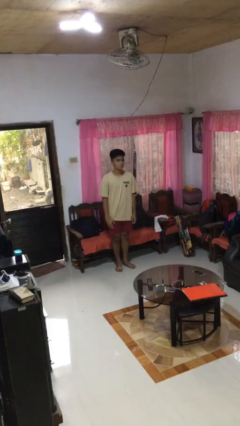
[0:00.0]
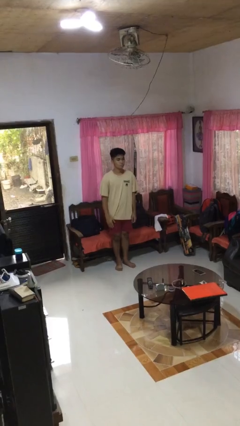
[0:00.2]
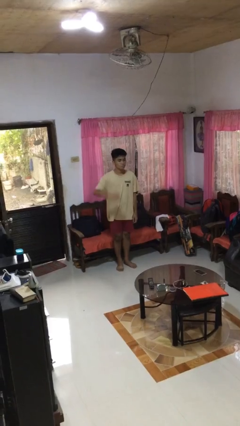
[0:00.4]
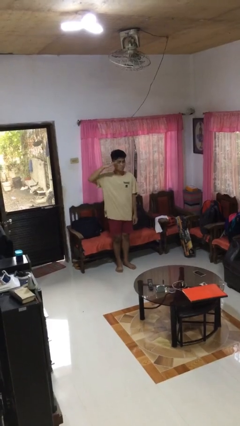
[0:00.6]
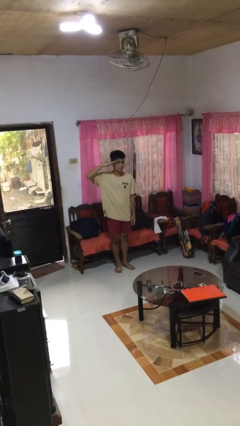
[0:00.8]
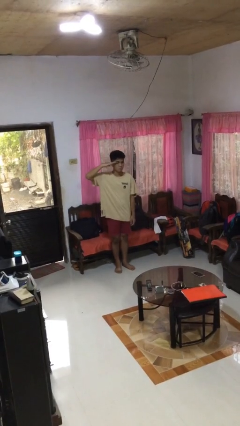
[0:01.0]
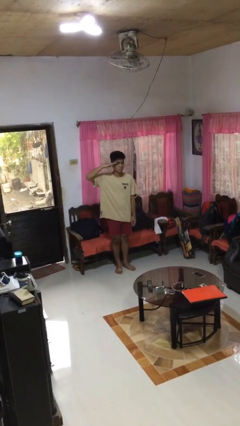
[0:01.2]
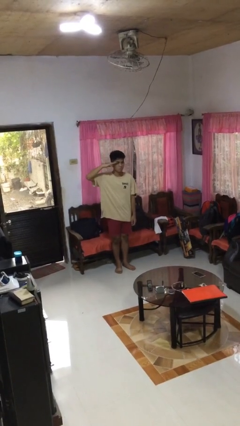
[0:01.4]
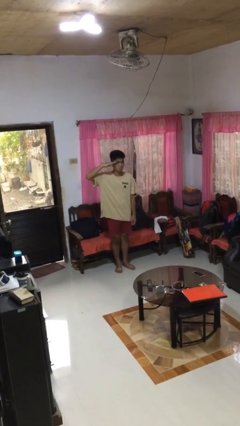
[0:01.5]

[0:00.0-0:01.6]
person salutes

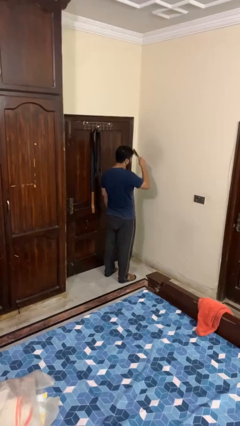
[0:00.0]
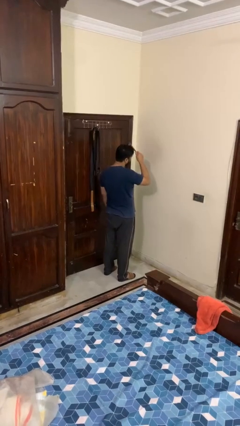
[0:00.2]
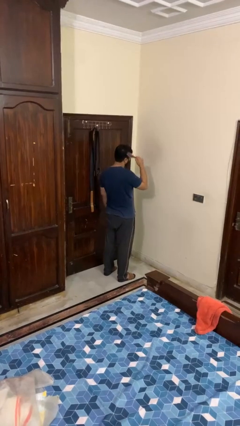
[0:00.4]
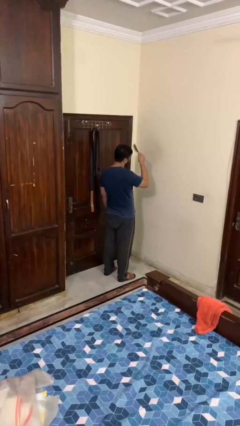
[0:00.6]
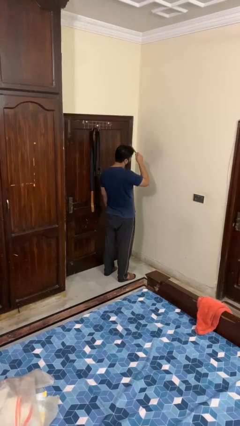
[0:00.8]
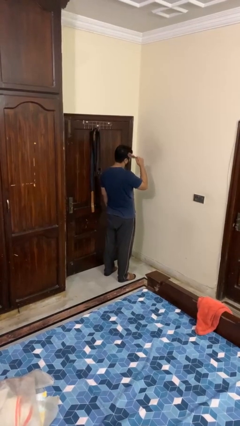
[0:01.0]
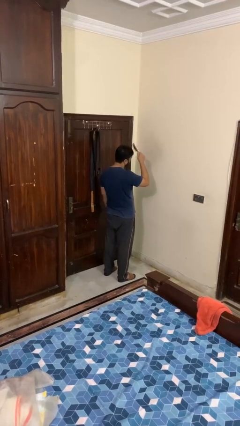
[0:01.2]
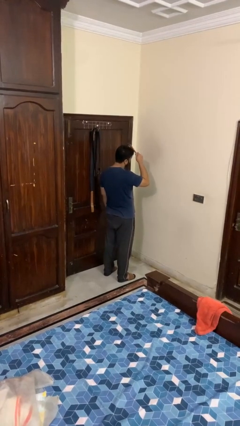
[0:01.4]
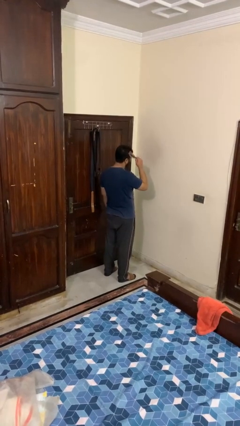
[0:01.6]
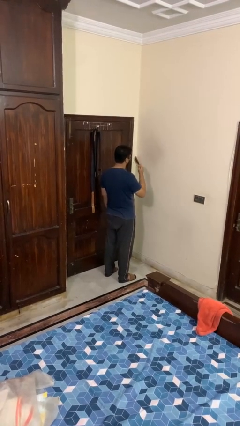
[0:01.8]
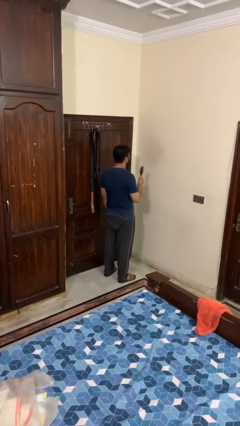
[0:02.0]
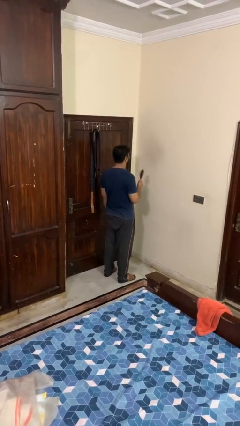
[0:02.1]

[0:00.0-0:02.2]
person brushes hair

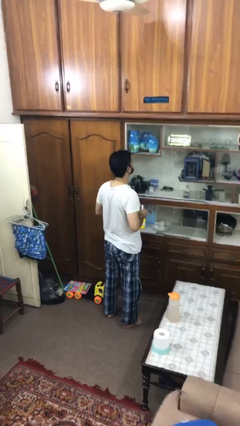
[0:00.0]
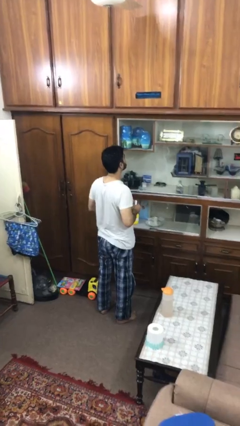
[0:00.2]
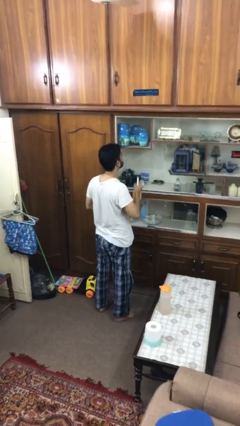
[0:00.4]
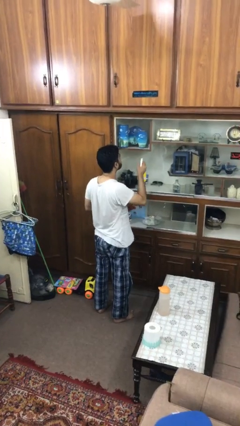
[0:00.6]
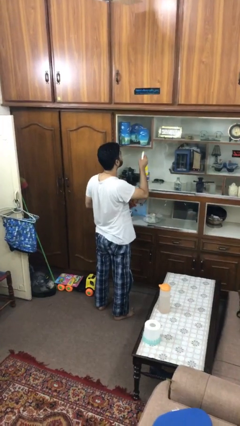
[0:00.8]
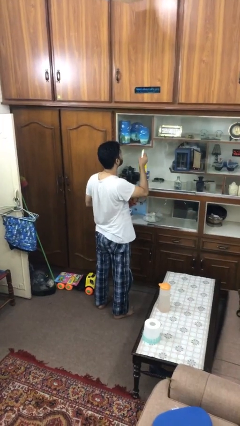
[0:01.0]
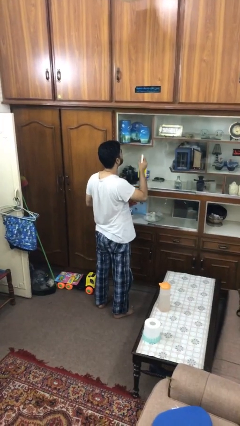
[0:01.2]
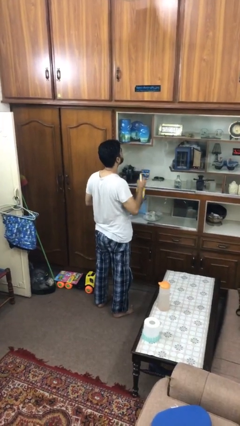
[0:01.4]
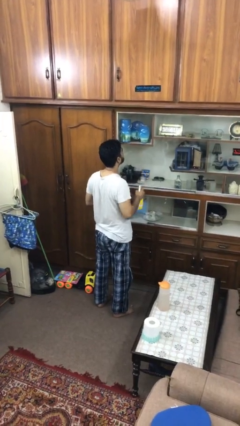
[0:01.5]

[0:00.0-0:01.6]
person sprays from bottle

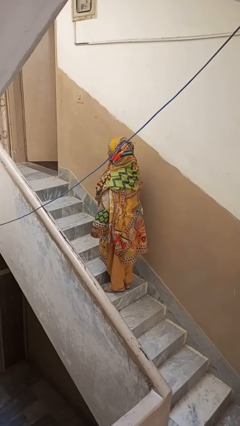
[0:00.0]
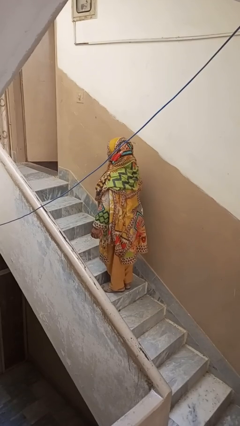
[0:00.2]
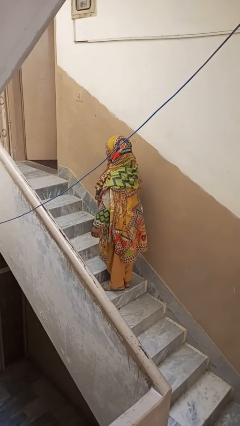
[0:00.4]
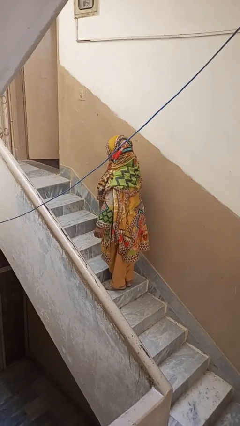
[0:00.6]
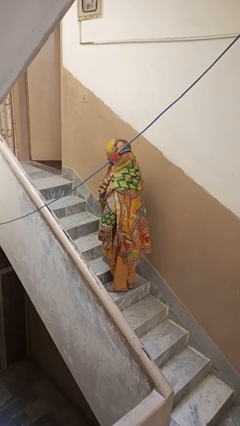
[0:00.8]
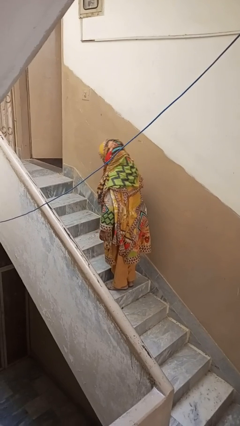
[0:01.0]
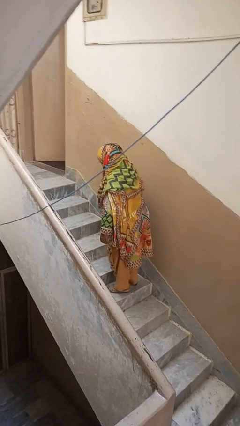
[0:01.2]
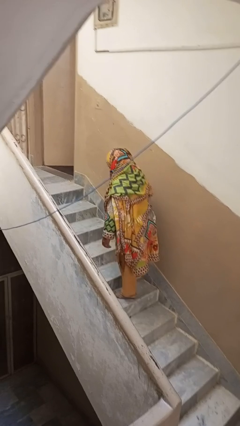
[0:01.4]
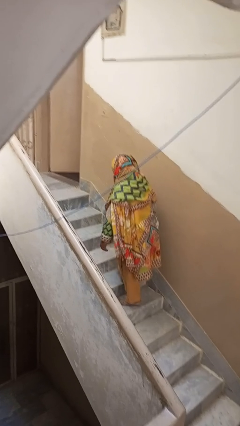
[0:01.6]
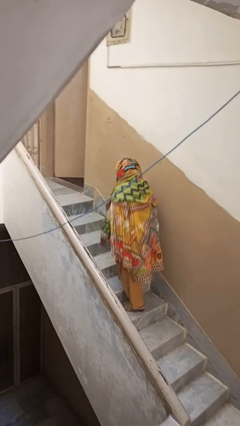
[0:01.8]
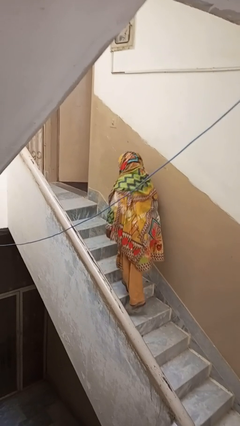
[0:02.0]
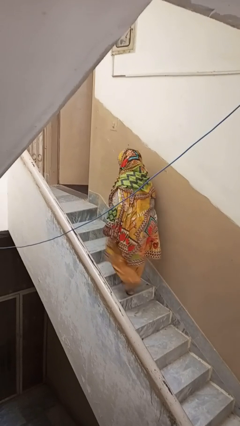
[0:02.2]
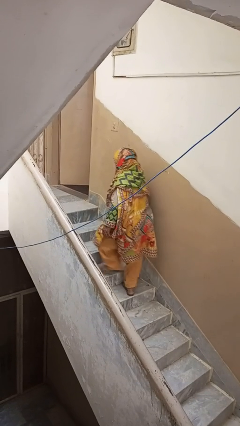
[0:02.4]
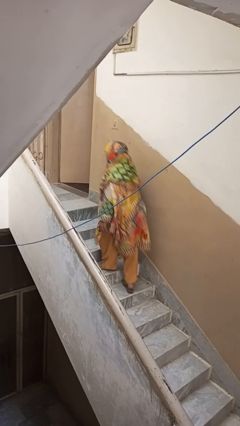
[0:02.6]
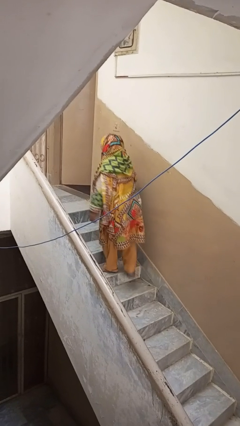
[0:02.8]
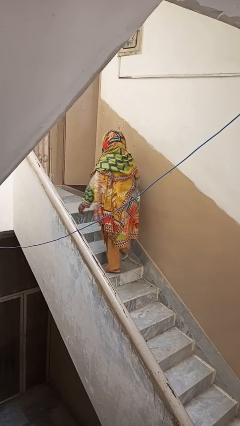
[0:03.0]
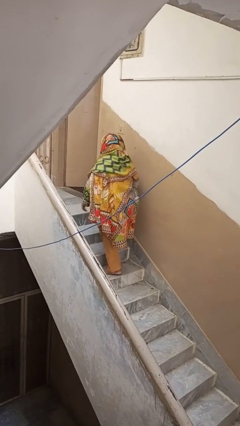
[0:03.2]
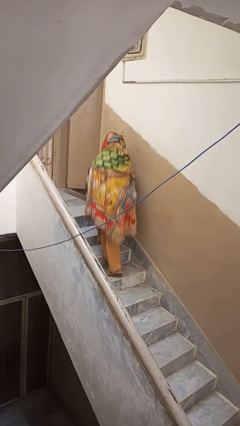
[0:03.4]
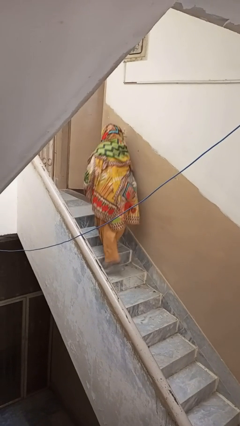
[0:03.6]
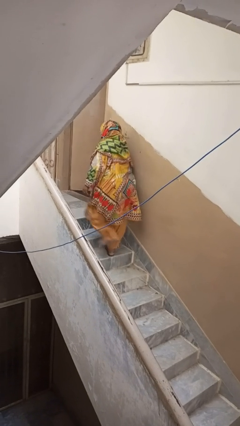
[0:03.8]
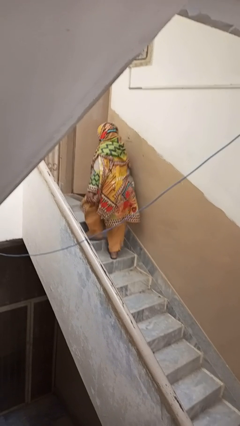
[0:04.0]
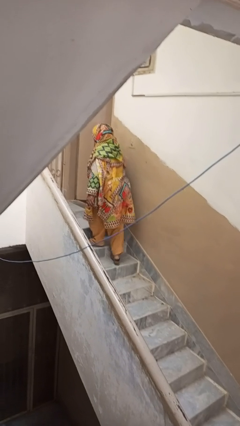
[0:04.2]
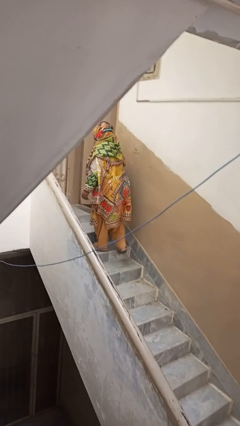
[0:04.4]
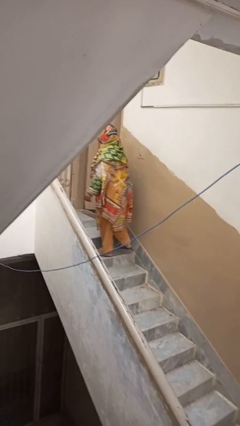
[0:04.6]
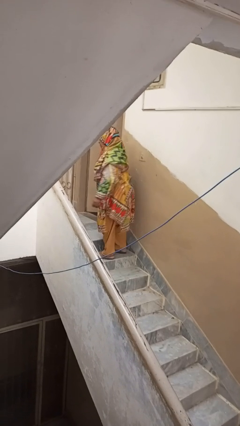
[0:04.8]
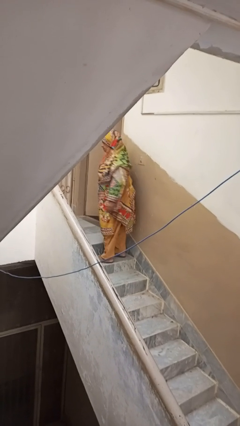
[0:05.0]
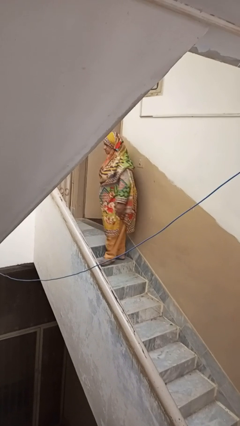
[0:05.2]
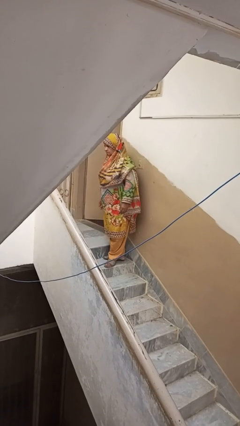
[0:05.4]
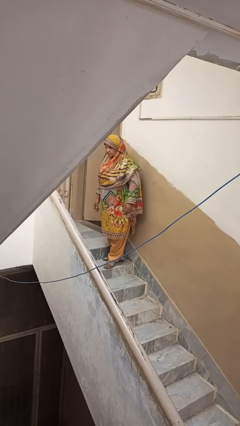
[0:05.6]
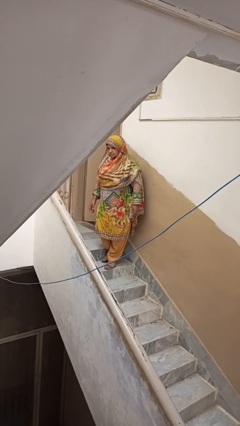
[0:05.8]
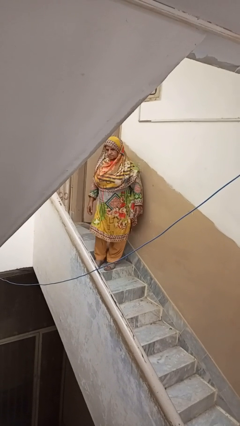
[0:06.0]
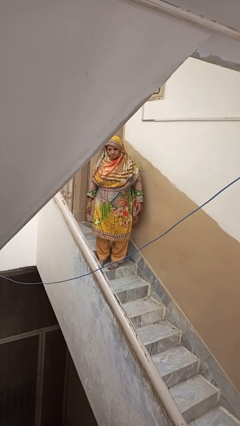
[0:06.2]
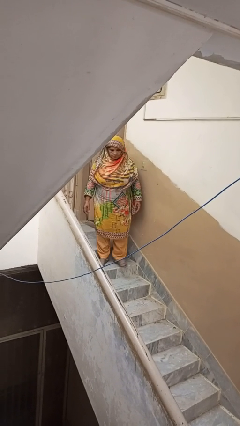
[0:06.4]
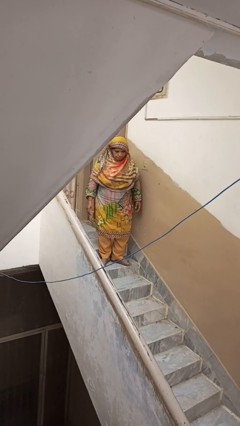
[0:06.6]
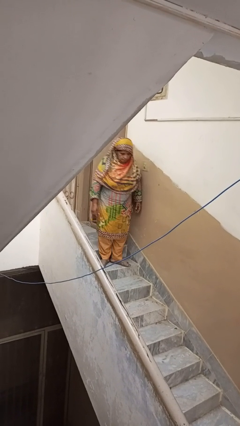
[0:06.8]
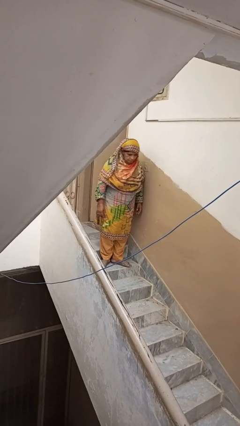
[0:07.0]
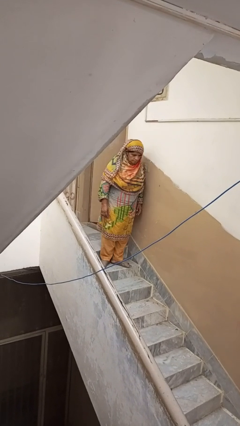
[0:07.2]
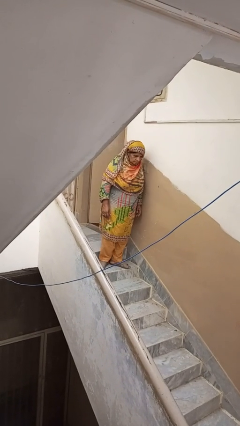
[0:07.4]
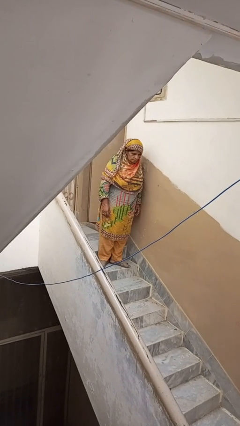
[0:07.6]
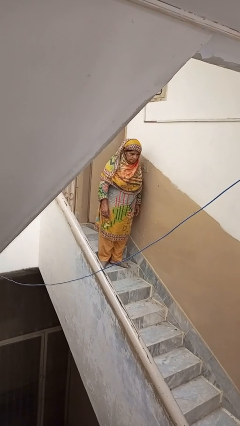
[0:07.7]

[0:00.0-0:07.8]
person climbs up stairs

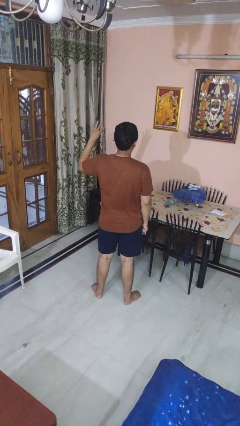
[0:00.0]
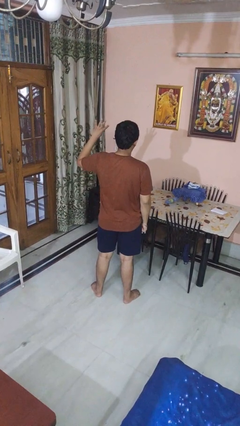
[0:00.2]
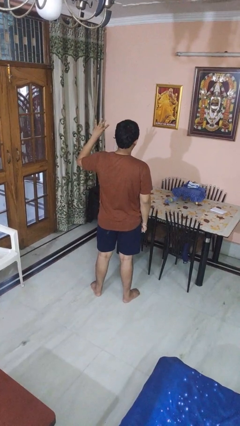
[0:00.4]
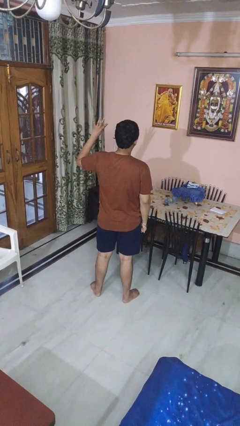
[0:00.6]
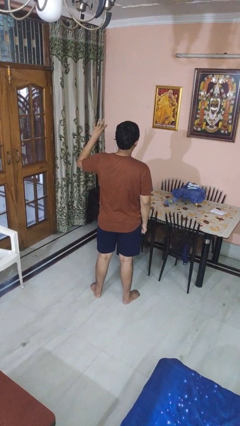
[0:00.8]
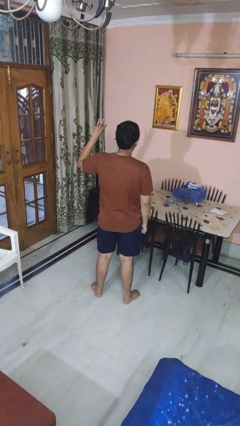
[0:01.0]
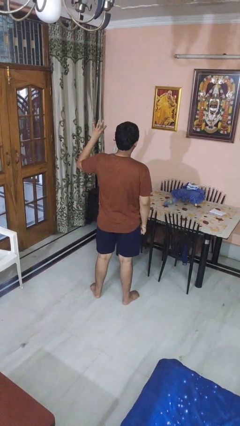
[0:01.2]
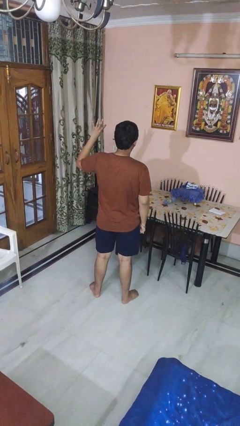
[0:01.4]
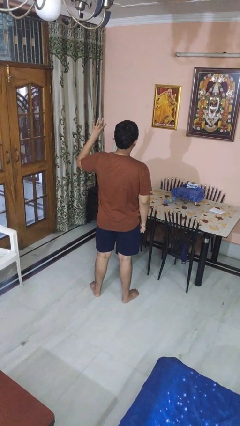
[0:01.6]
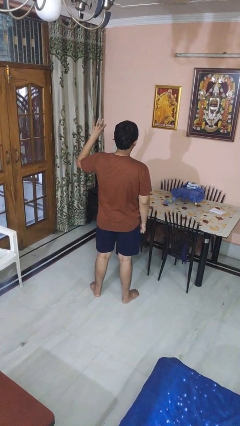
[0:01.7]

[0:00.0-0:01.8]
person gestures number four

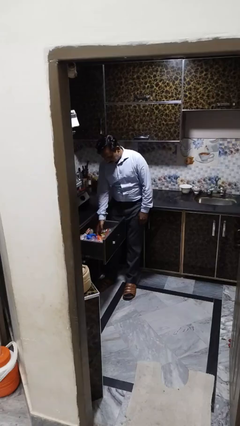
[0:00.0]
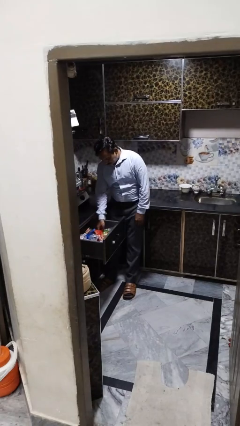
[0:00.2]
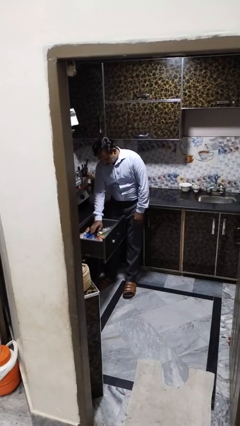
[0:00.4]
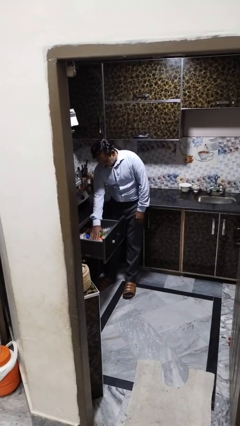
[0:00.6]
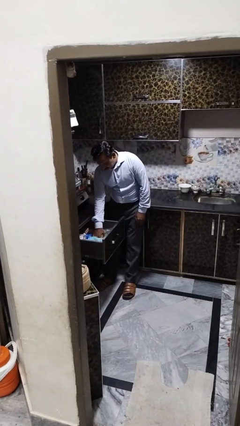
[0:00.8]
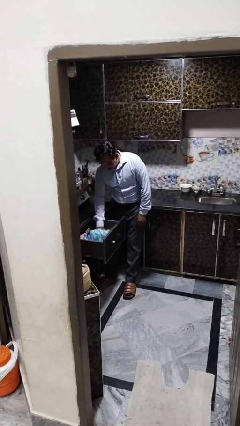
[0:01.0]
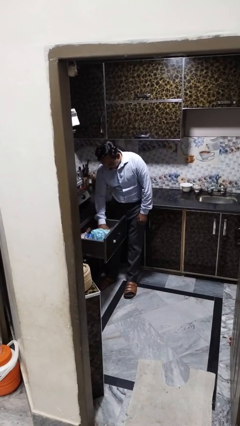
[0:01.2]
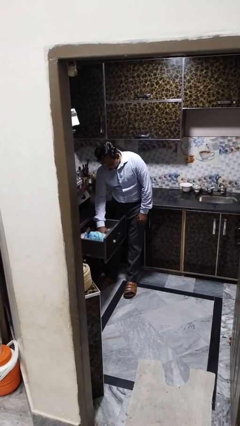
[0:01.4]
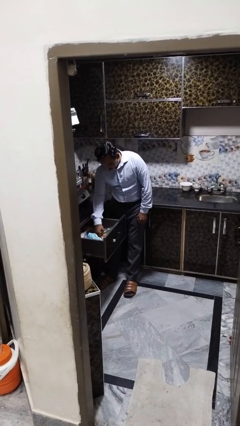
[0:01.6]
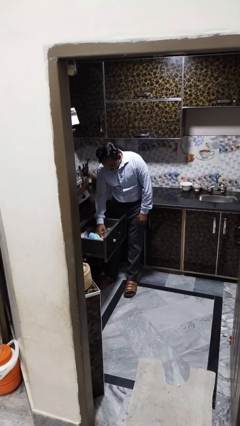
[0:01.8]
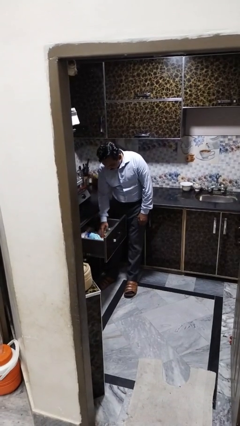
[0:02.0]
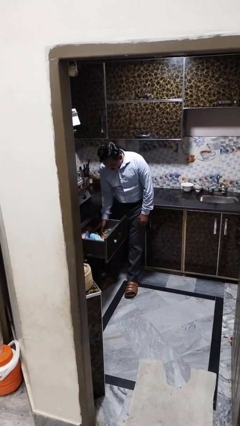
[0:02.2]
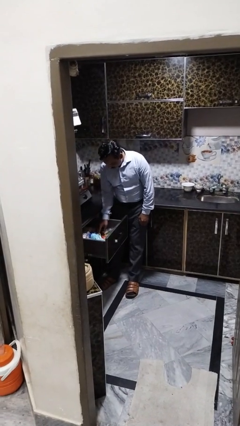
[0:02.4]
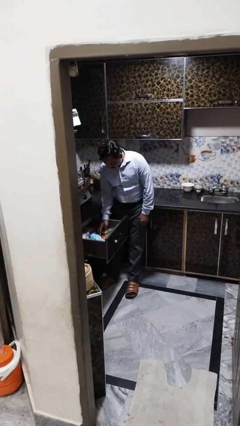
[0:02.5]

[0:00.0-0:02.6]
person searches in kitchen drawer
